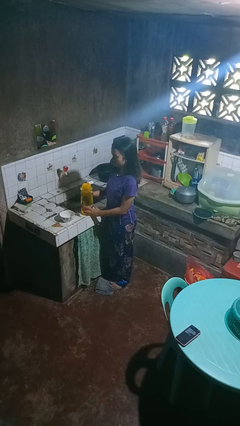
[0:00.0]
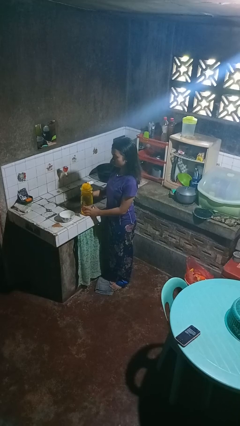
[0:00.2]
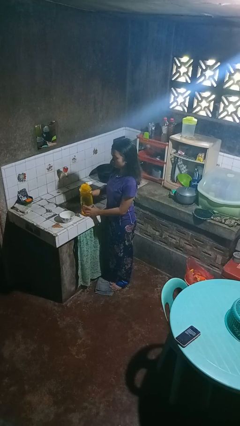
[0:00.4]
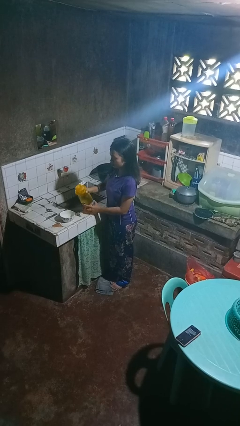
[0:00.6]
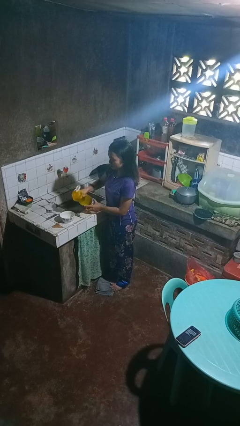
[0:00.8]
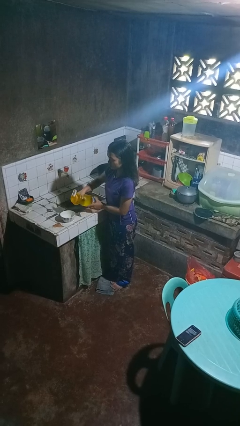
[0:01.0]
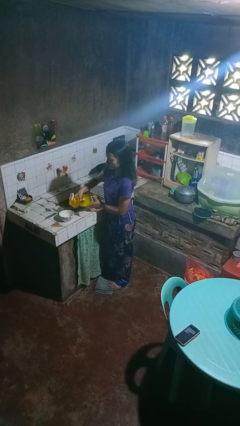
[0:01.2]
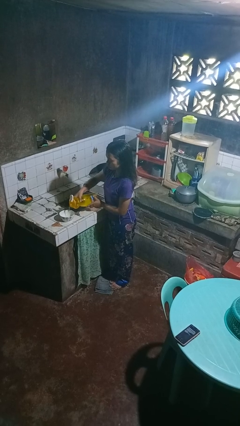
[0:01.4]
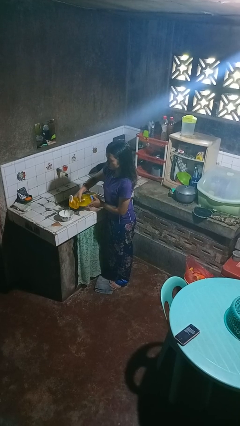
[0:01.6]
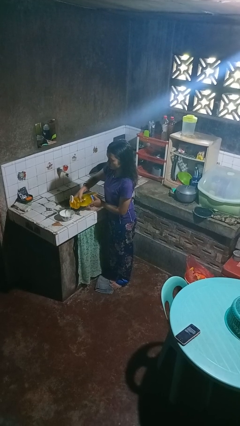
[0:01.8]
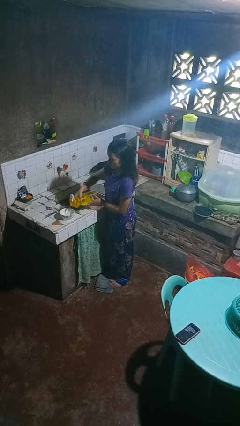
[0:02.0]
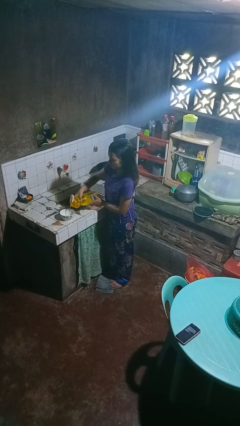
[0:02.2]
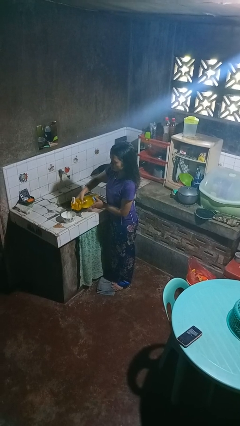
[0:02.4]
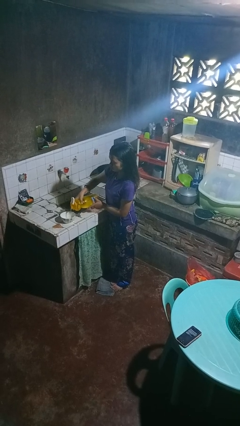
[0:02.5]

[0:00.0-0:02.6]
person pours into bowl

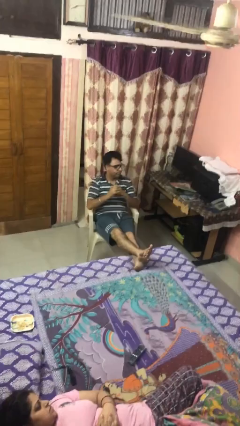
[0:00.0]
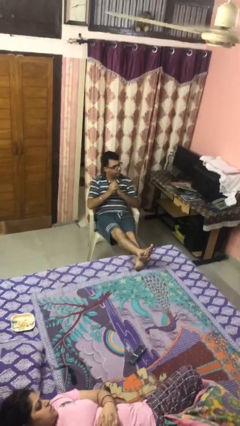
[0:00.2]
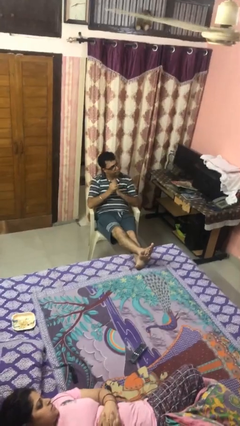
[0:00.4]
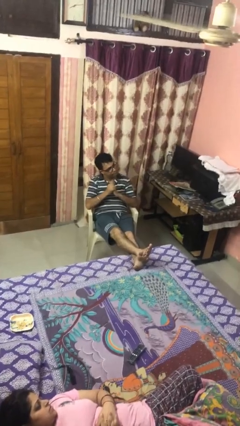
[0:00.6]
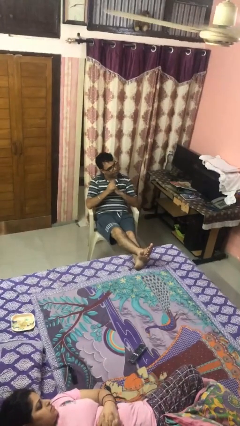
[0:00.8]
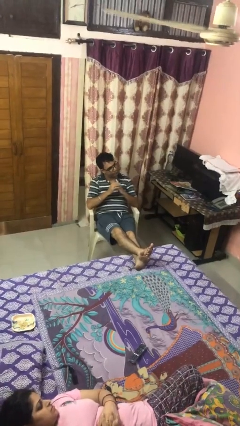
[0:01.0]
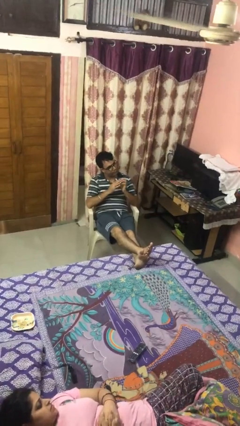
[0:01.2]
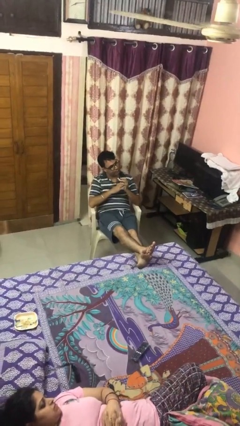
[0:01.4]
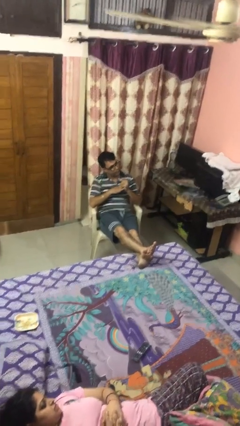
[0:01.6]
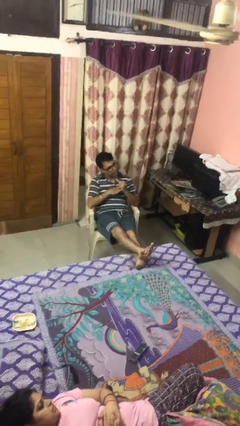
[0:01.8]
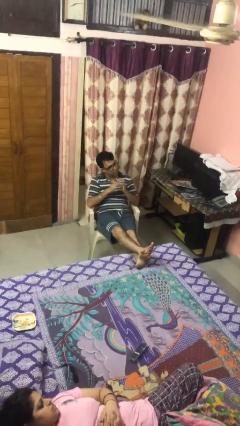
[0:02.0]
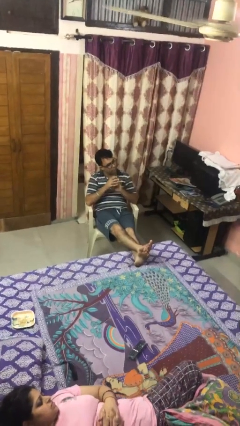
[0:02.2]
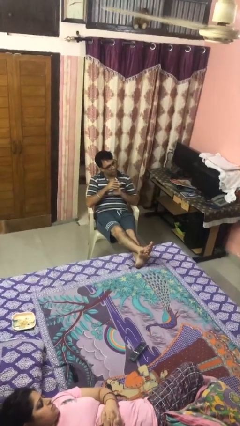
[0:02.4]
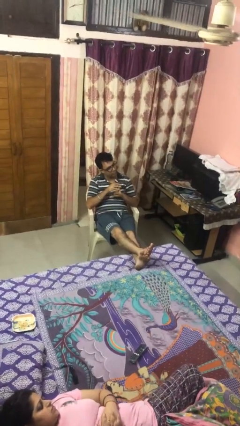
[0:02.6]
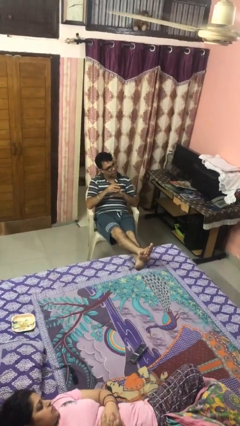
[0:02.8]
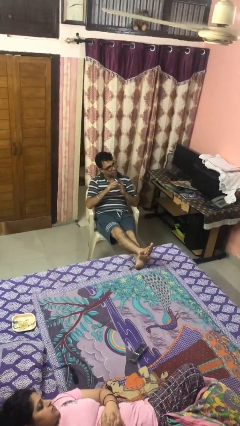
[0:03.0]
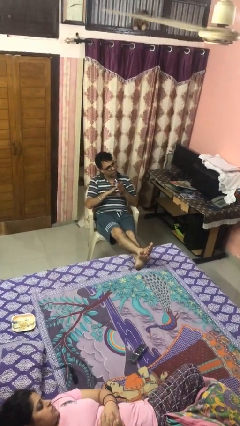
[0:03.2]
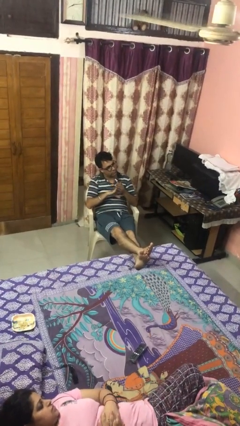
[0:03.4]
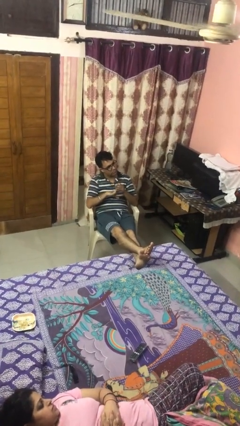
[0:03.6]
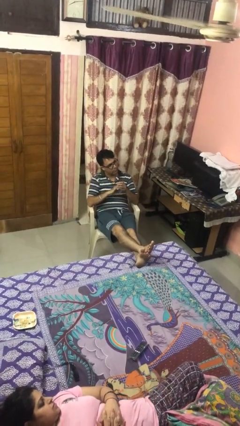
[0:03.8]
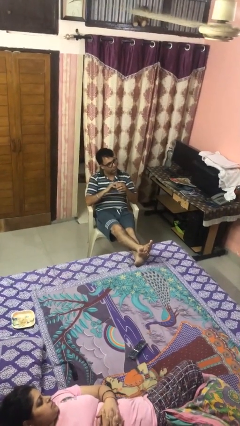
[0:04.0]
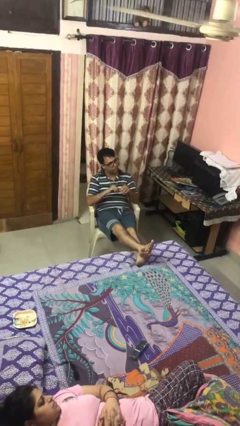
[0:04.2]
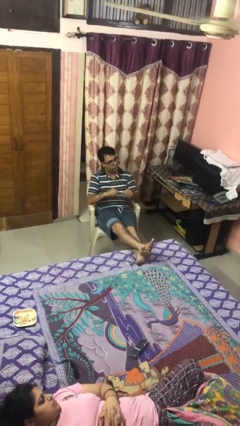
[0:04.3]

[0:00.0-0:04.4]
person cracks knuckles

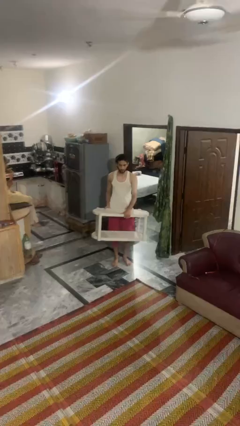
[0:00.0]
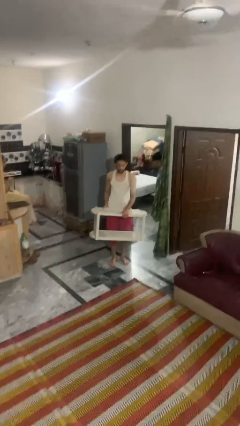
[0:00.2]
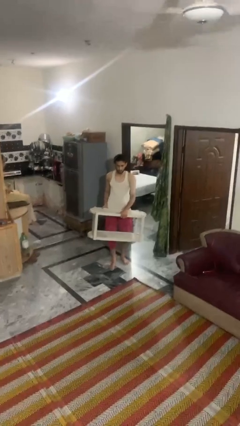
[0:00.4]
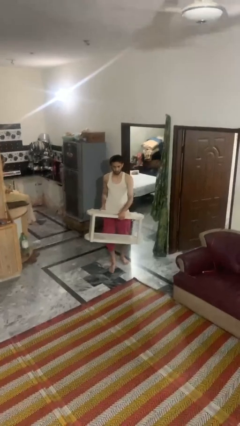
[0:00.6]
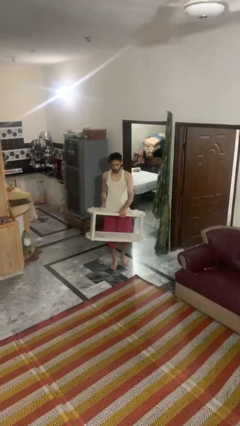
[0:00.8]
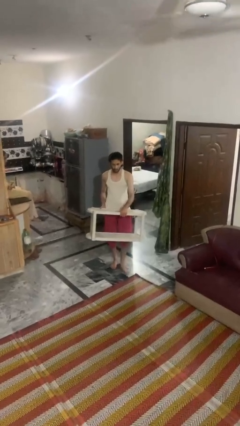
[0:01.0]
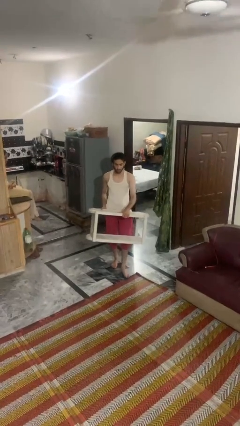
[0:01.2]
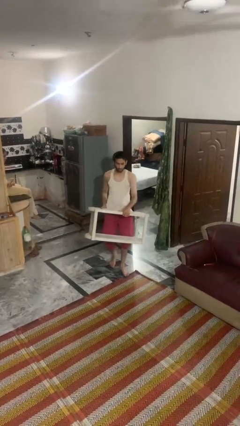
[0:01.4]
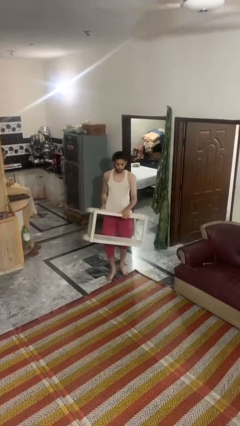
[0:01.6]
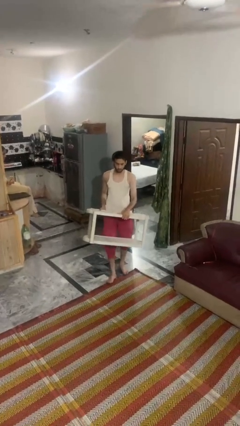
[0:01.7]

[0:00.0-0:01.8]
person carries furniture

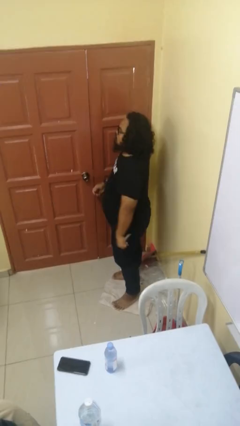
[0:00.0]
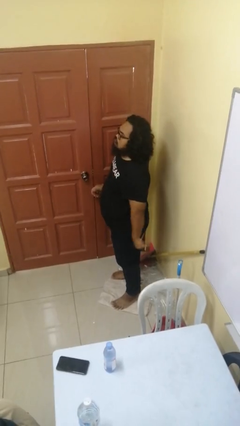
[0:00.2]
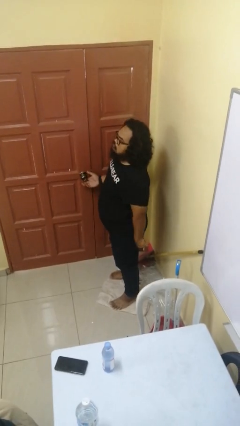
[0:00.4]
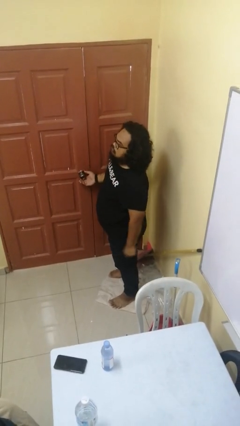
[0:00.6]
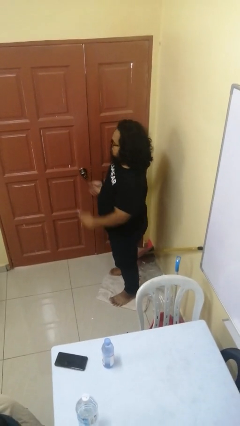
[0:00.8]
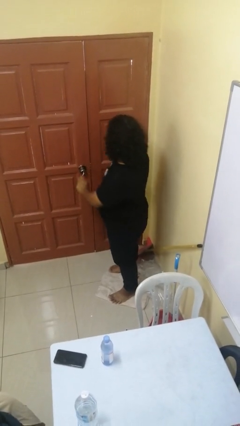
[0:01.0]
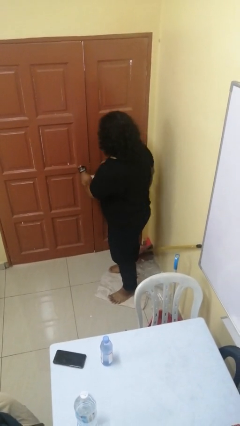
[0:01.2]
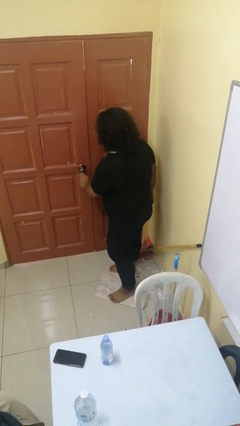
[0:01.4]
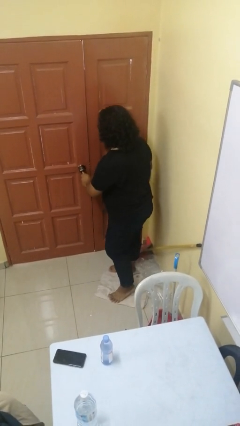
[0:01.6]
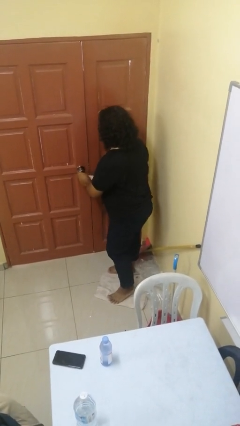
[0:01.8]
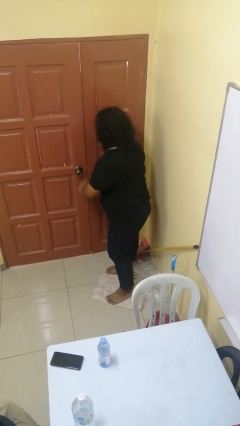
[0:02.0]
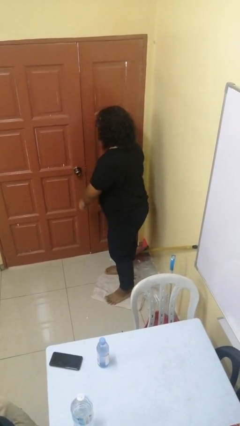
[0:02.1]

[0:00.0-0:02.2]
person unlocks door with keys

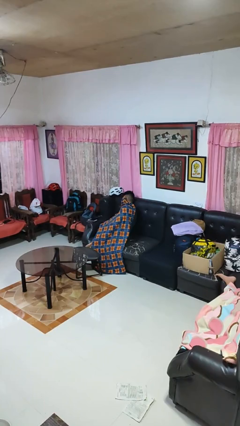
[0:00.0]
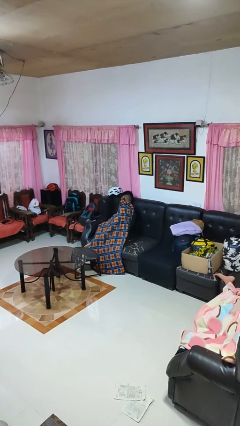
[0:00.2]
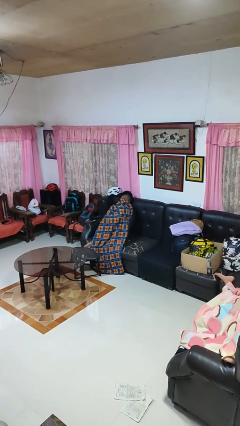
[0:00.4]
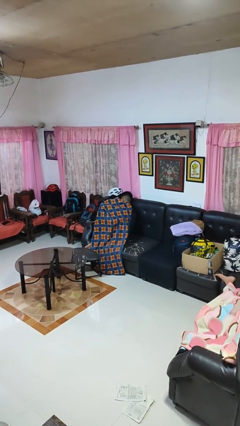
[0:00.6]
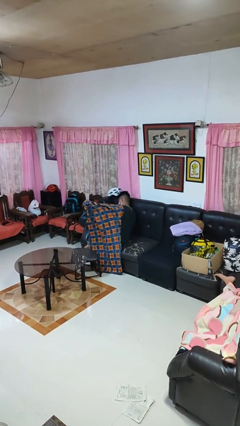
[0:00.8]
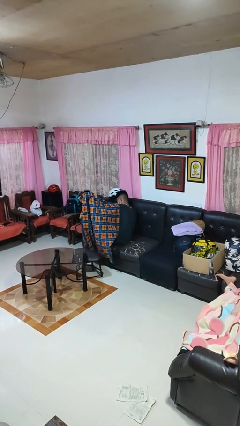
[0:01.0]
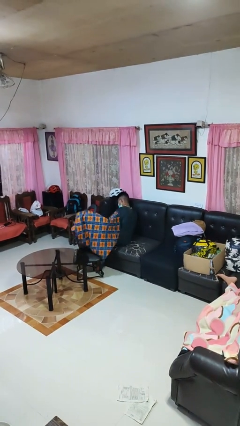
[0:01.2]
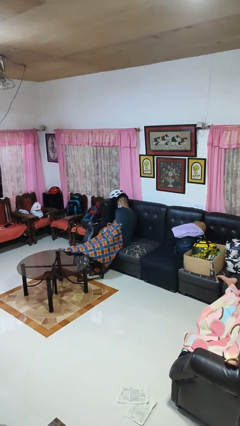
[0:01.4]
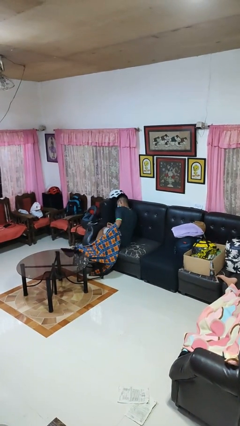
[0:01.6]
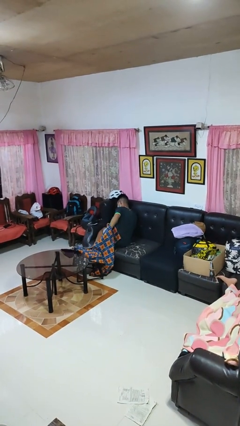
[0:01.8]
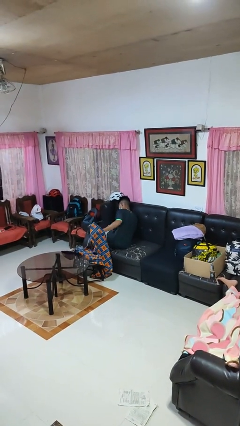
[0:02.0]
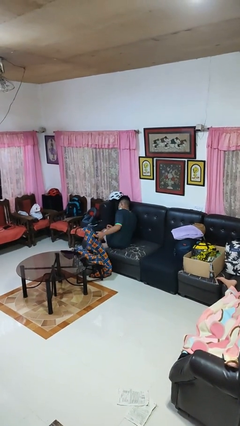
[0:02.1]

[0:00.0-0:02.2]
person uncovers with blanket

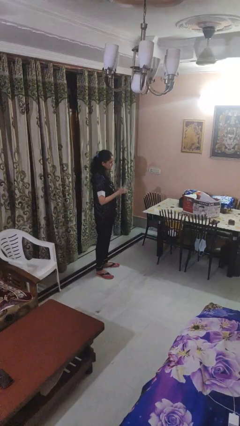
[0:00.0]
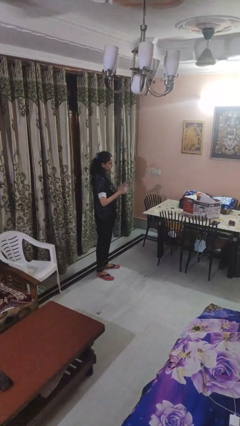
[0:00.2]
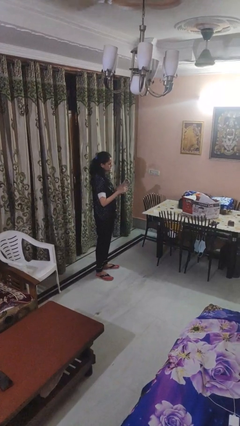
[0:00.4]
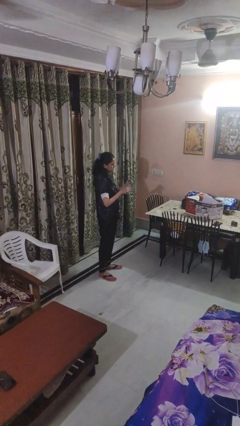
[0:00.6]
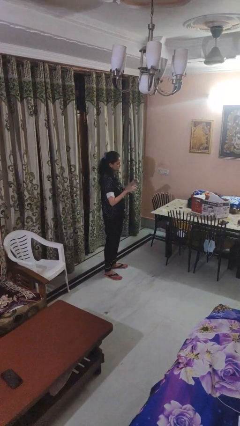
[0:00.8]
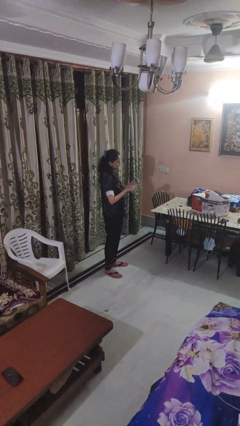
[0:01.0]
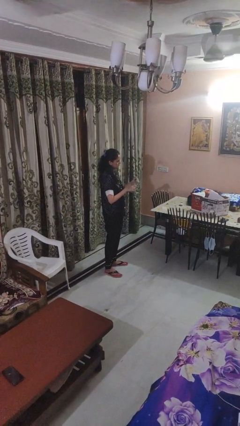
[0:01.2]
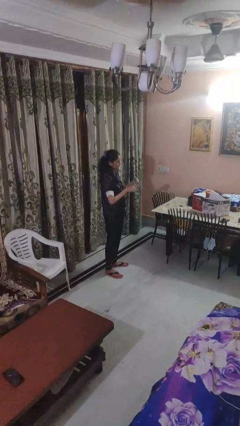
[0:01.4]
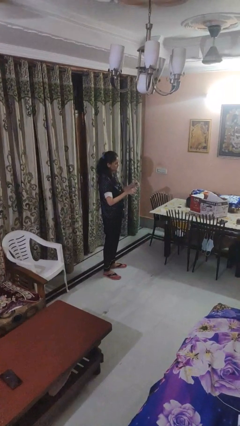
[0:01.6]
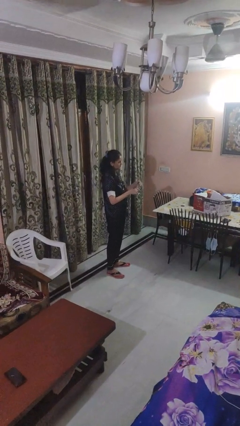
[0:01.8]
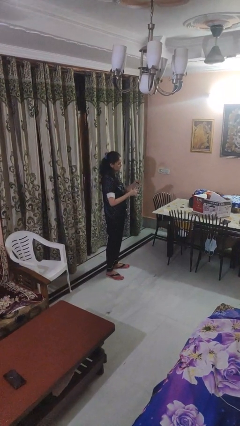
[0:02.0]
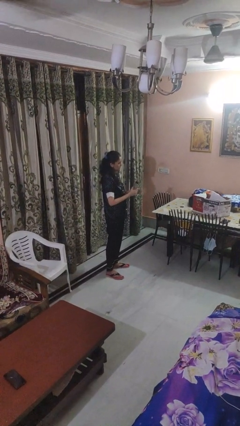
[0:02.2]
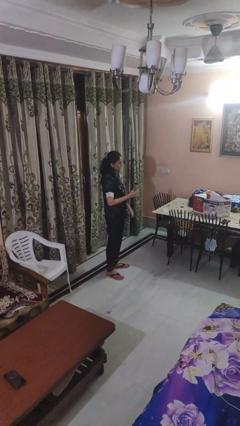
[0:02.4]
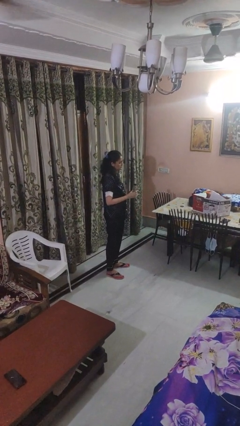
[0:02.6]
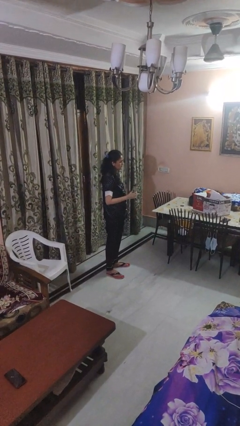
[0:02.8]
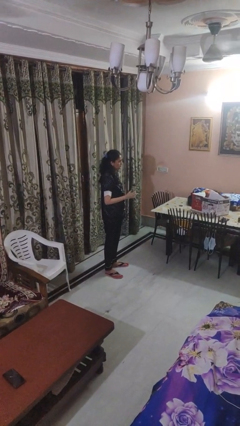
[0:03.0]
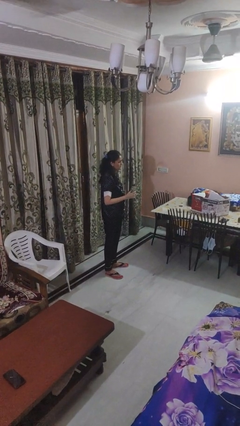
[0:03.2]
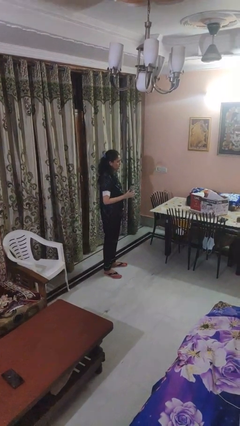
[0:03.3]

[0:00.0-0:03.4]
person screws lid to bottle

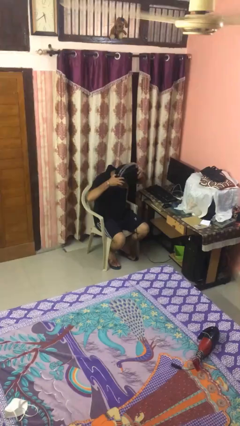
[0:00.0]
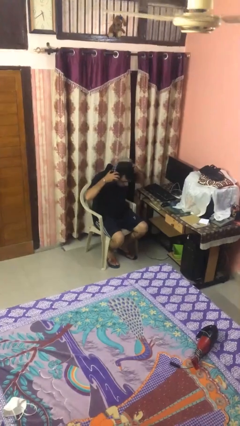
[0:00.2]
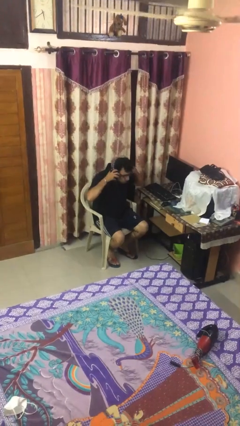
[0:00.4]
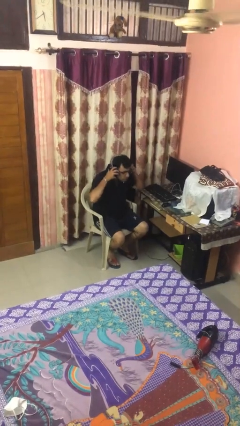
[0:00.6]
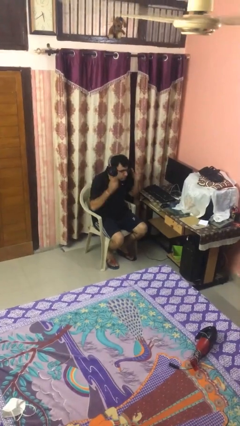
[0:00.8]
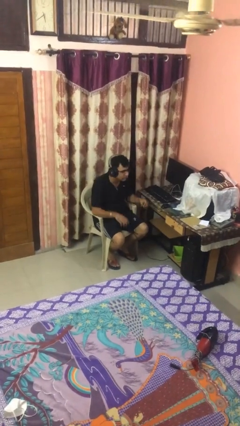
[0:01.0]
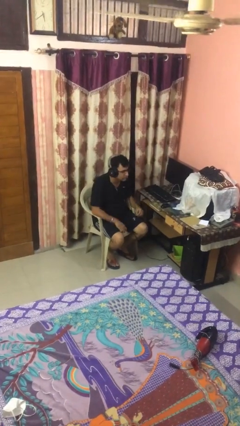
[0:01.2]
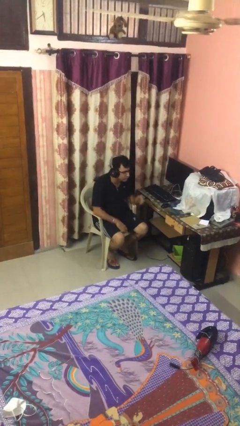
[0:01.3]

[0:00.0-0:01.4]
person puts on headphones
